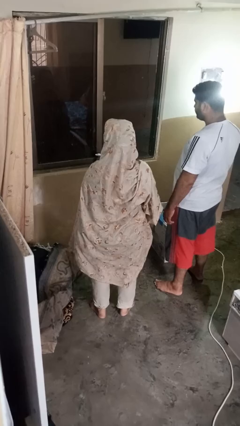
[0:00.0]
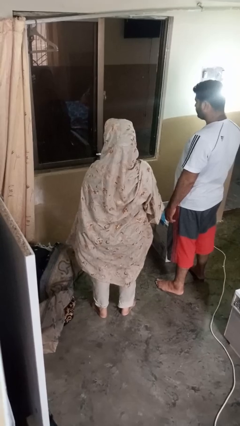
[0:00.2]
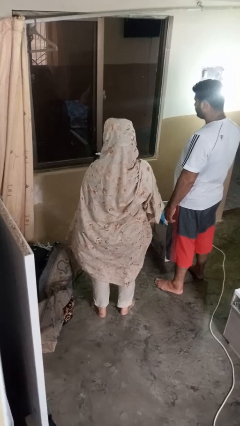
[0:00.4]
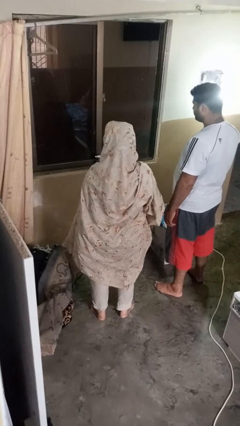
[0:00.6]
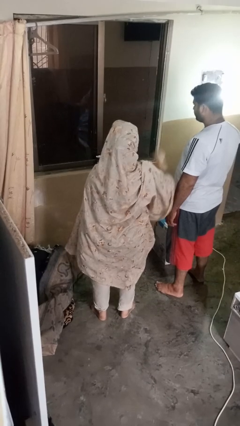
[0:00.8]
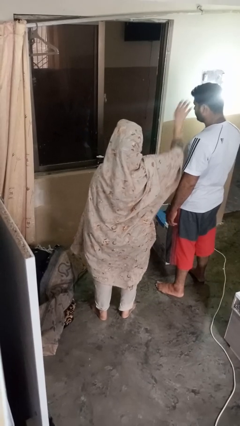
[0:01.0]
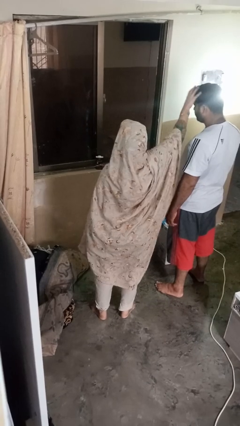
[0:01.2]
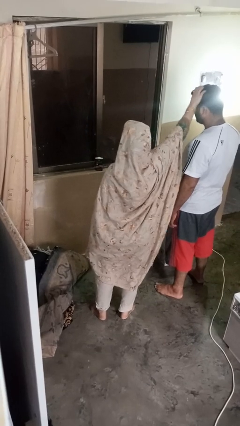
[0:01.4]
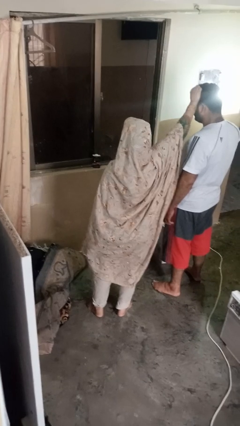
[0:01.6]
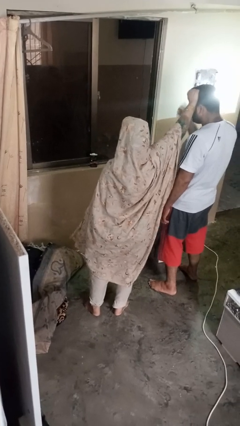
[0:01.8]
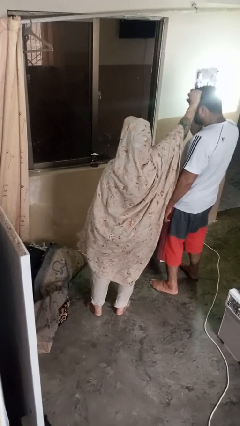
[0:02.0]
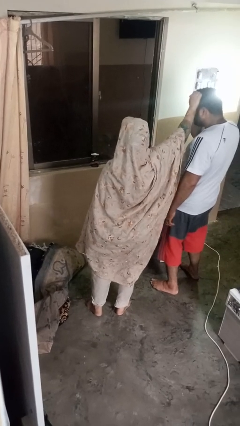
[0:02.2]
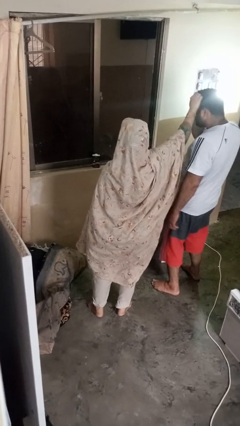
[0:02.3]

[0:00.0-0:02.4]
person grabs person by hair

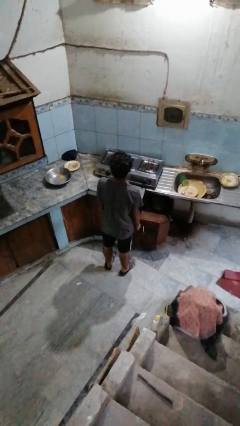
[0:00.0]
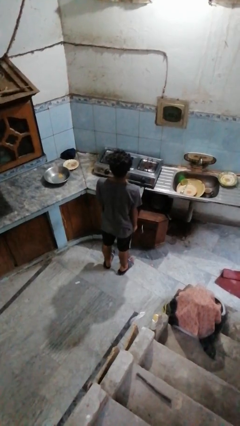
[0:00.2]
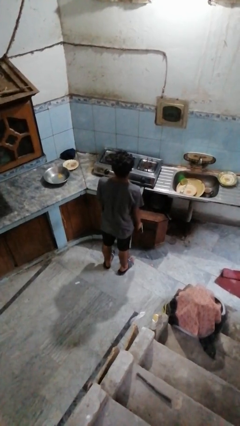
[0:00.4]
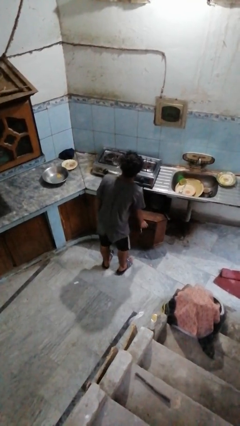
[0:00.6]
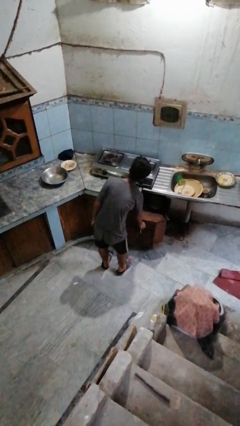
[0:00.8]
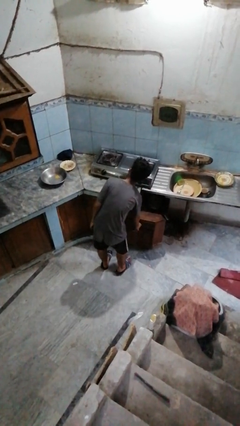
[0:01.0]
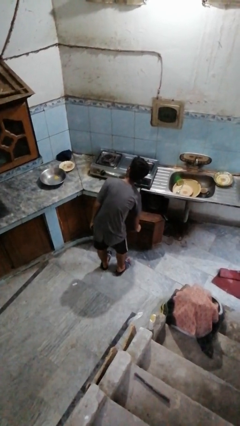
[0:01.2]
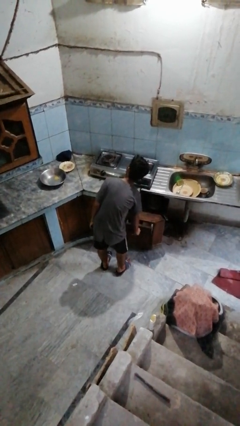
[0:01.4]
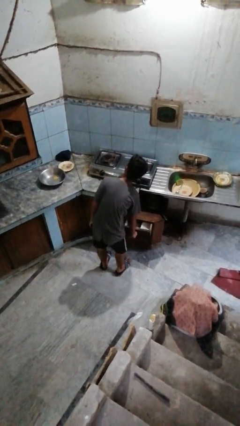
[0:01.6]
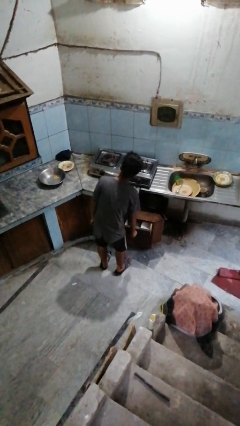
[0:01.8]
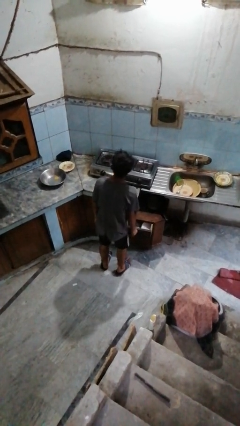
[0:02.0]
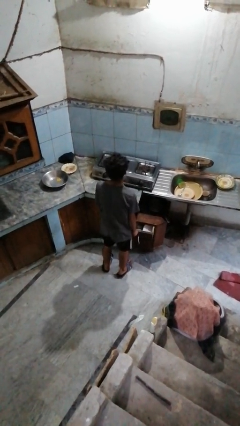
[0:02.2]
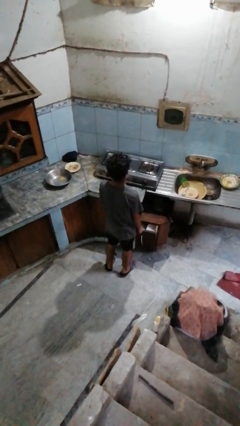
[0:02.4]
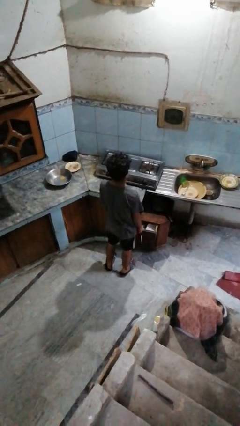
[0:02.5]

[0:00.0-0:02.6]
person opens kitchen drawer

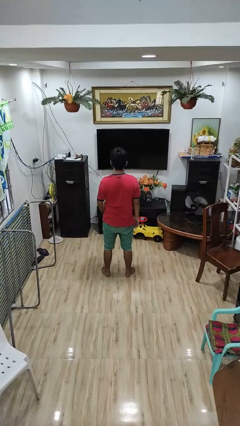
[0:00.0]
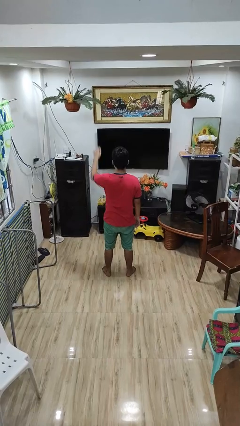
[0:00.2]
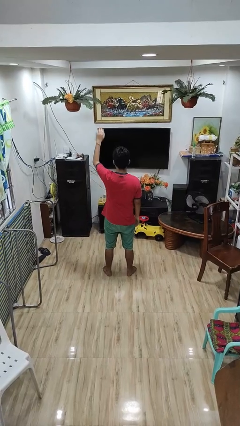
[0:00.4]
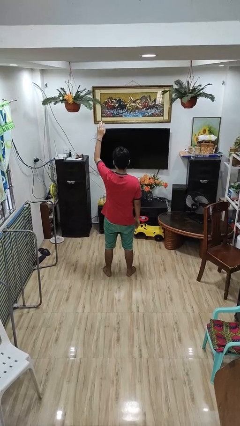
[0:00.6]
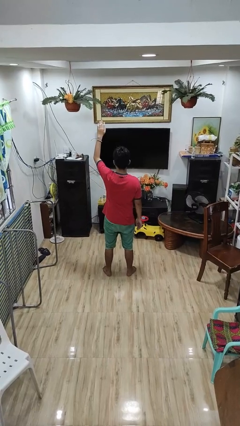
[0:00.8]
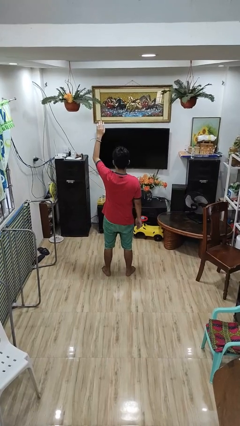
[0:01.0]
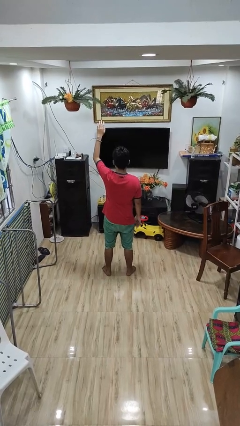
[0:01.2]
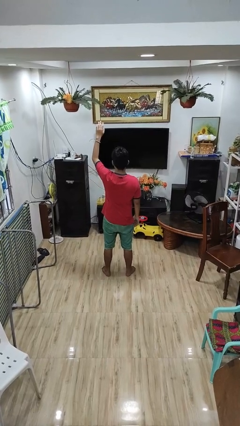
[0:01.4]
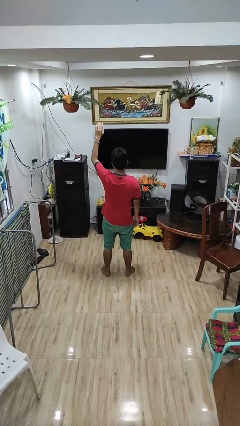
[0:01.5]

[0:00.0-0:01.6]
person gestures raise hand

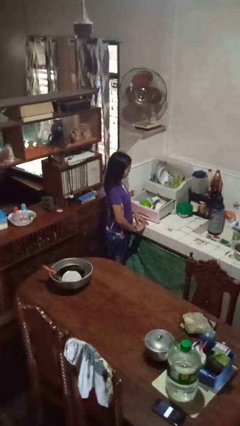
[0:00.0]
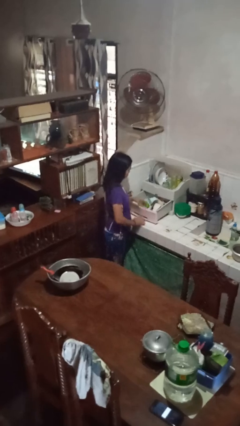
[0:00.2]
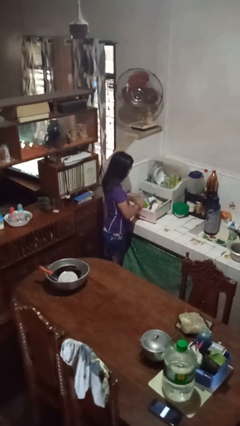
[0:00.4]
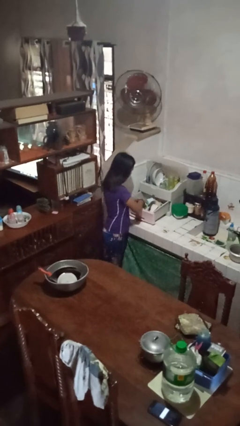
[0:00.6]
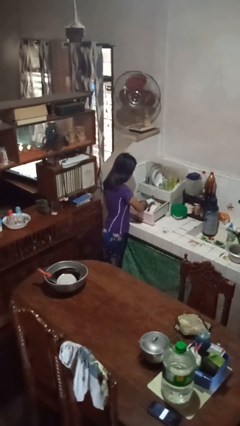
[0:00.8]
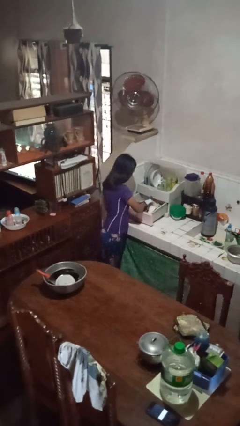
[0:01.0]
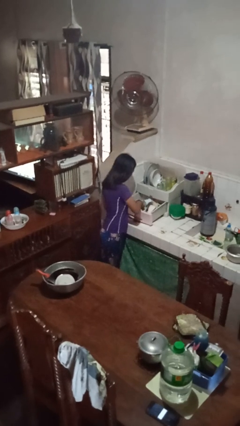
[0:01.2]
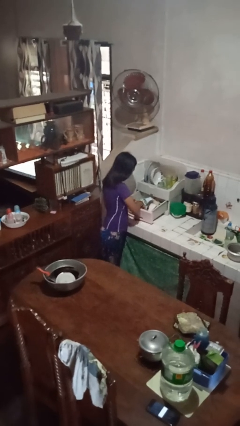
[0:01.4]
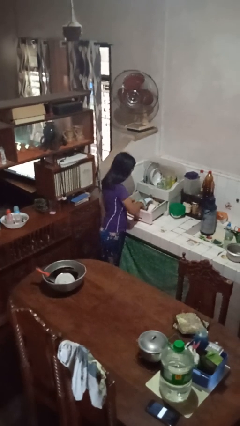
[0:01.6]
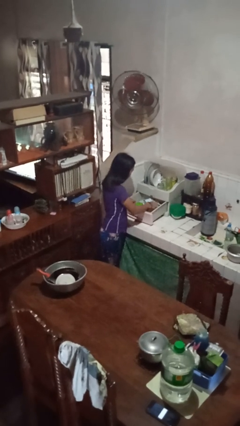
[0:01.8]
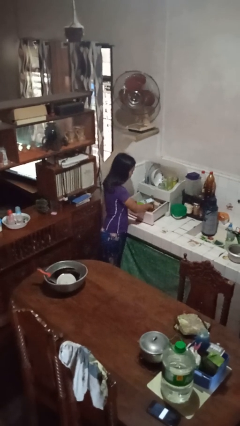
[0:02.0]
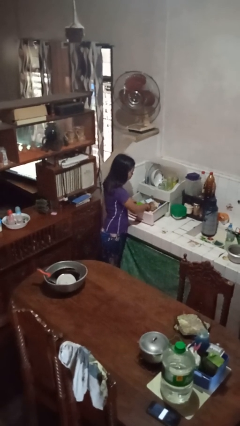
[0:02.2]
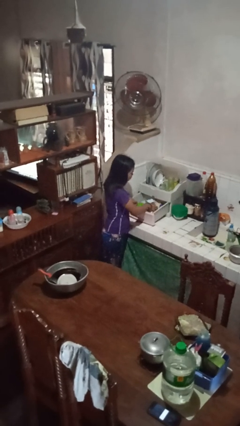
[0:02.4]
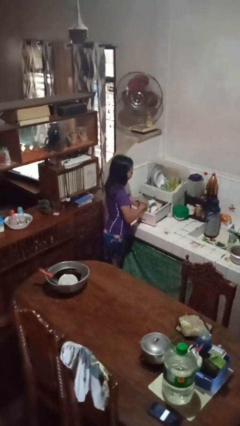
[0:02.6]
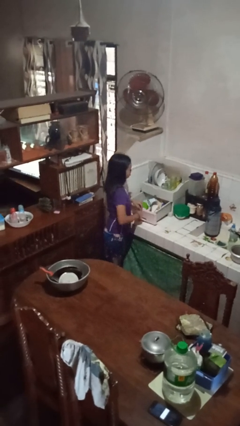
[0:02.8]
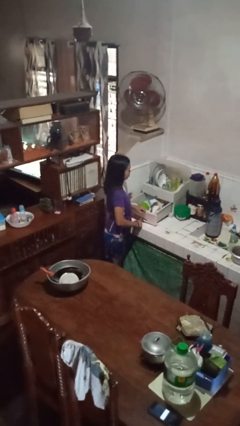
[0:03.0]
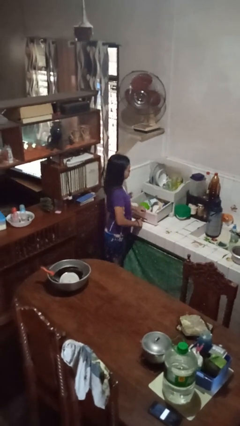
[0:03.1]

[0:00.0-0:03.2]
person searches in kitchen drawer

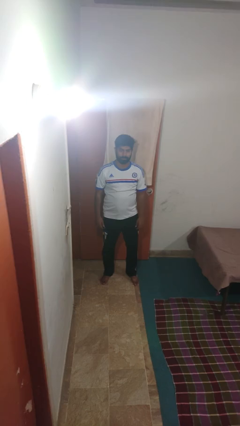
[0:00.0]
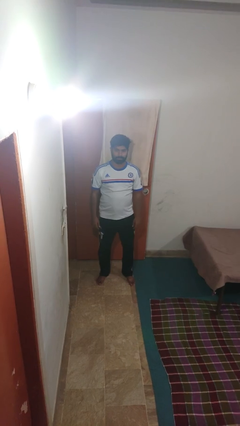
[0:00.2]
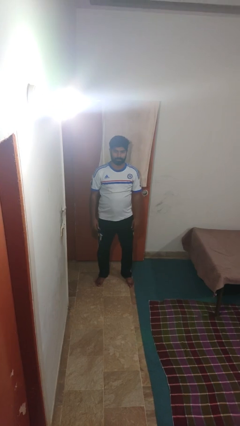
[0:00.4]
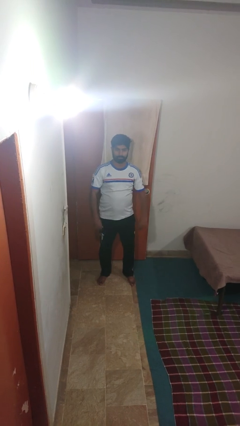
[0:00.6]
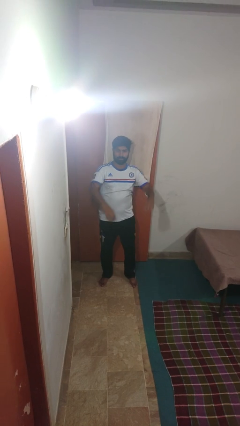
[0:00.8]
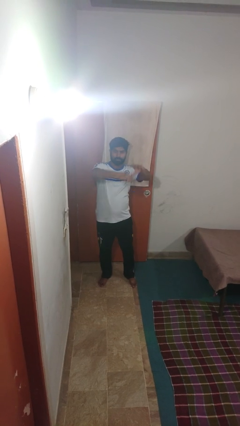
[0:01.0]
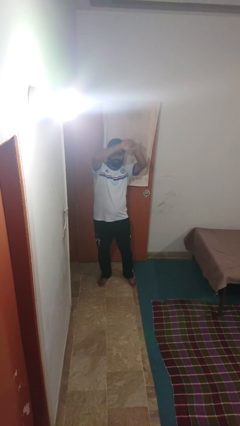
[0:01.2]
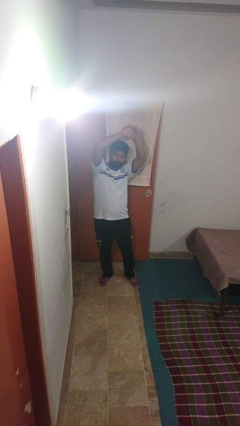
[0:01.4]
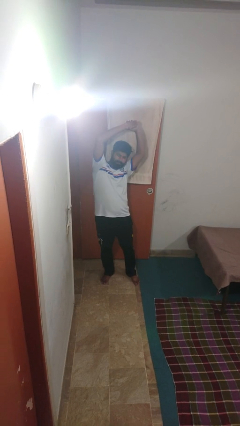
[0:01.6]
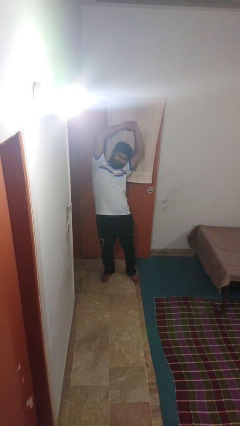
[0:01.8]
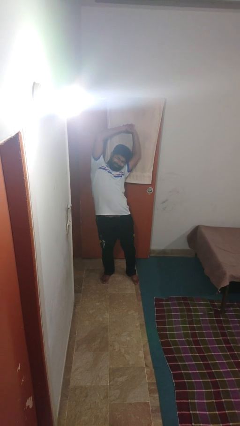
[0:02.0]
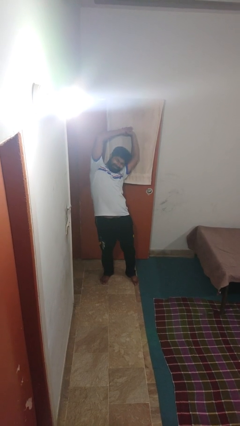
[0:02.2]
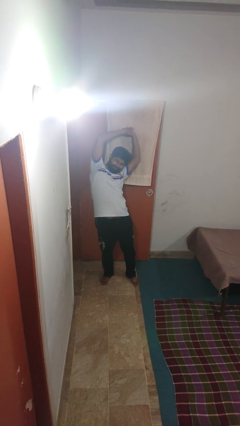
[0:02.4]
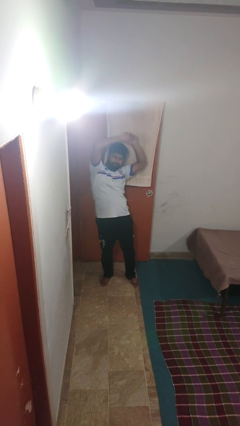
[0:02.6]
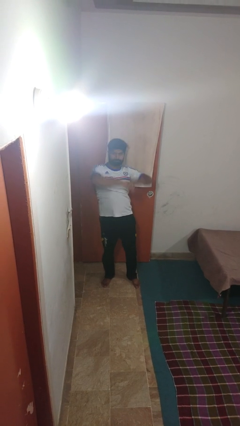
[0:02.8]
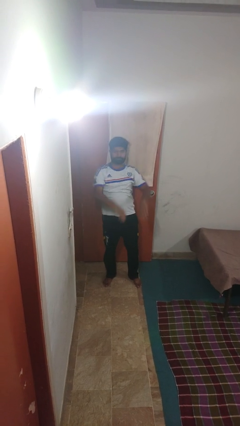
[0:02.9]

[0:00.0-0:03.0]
person stretches arms over head

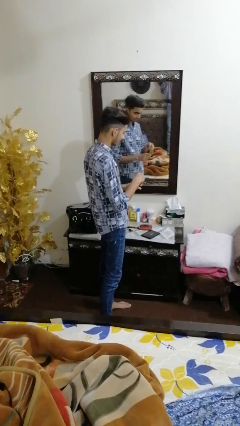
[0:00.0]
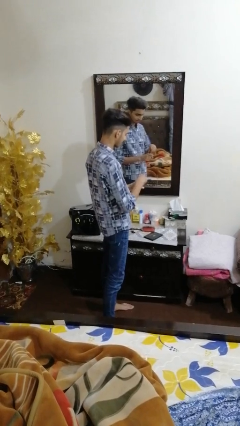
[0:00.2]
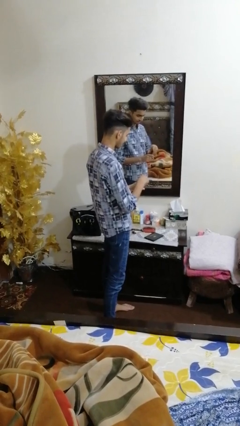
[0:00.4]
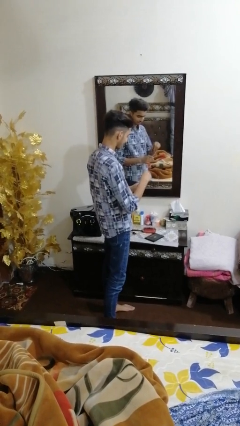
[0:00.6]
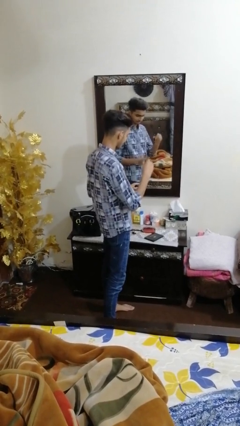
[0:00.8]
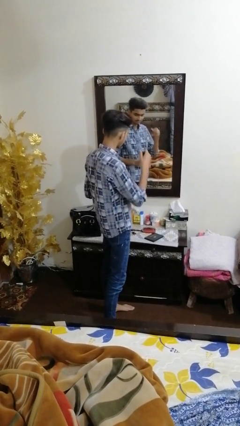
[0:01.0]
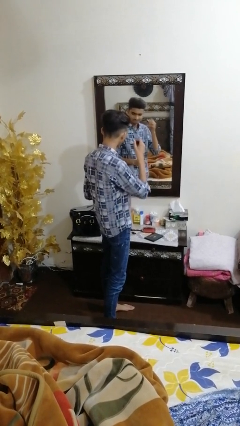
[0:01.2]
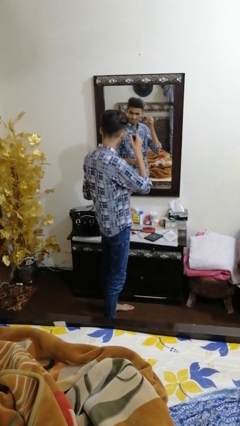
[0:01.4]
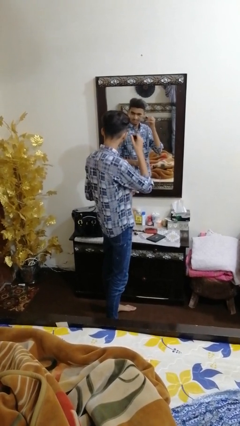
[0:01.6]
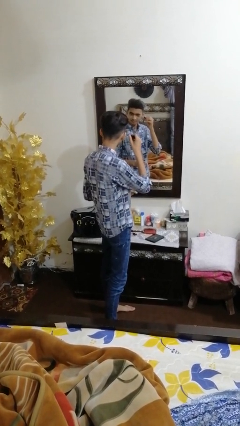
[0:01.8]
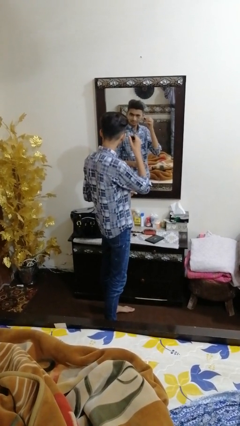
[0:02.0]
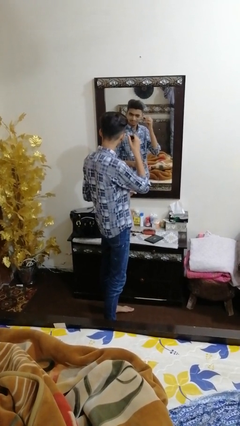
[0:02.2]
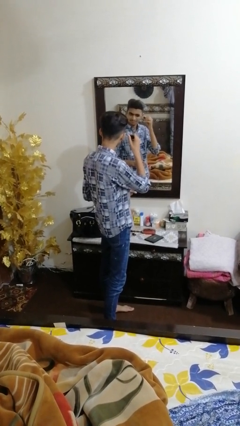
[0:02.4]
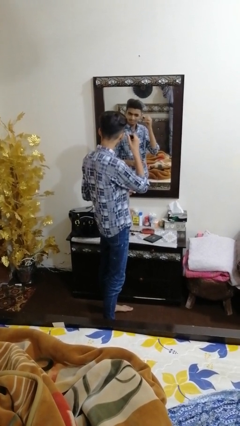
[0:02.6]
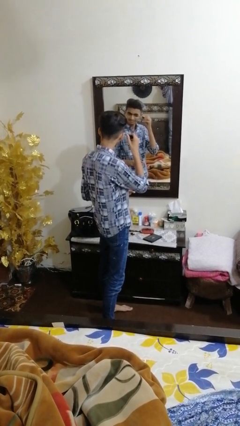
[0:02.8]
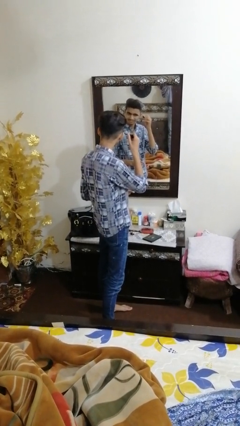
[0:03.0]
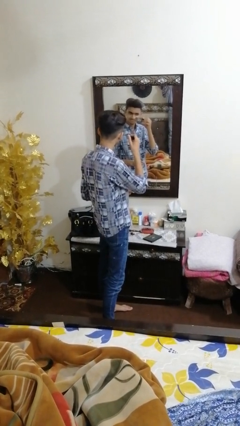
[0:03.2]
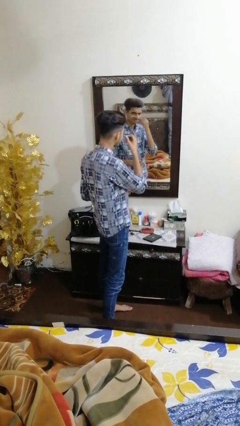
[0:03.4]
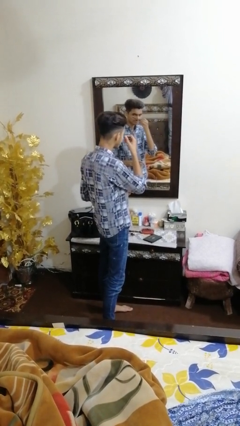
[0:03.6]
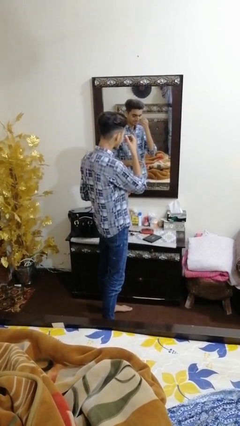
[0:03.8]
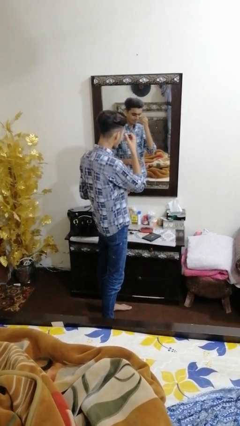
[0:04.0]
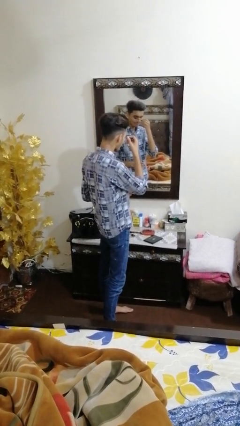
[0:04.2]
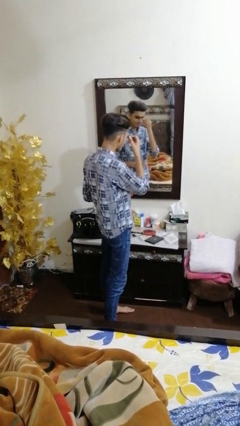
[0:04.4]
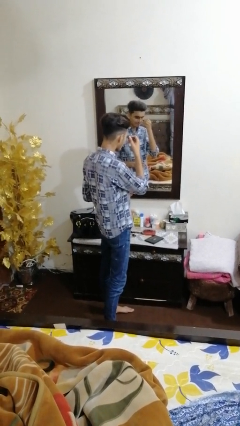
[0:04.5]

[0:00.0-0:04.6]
person applies eye makeup
